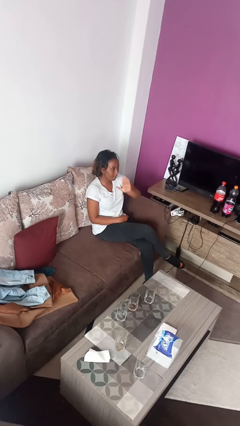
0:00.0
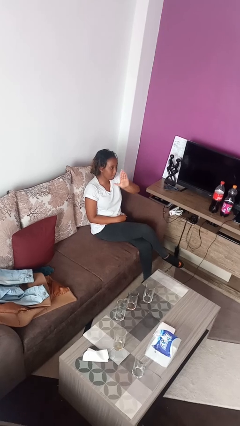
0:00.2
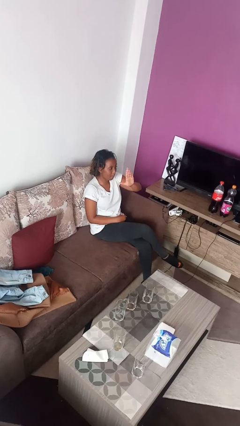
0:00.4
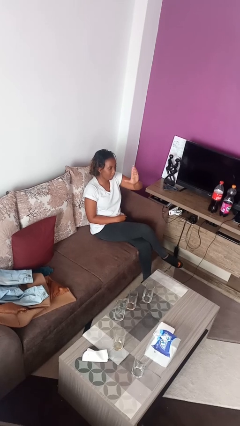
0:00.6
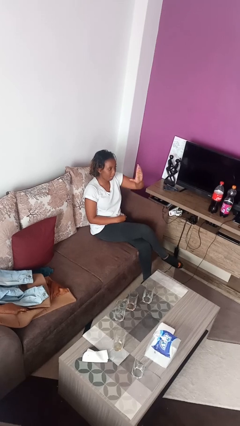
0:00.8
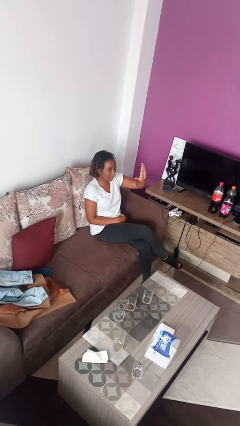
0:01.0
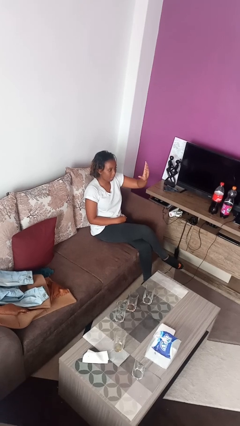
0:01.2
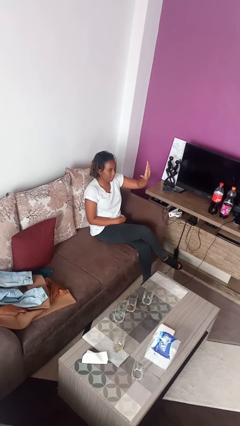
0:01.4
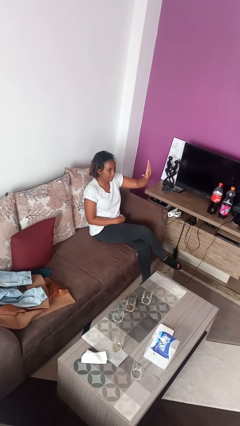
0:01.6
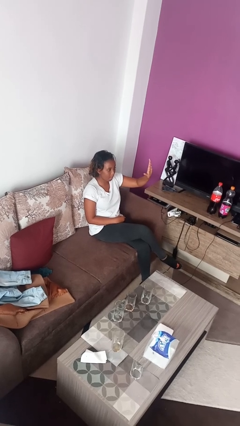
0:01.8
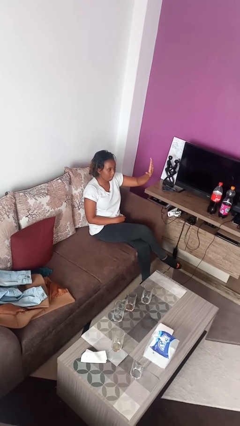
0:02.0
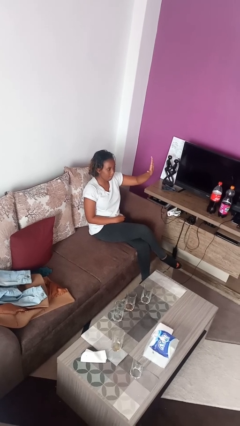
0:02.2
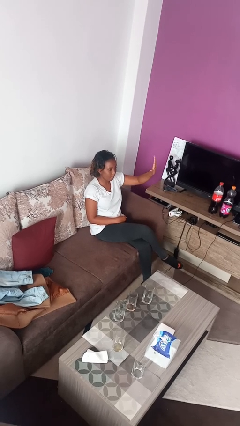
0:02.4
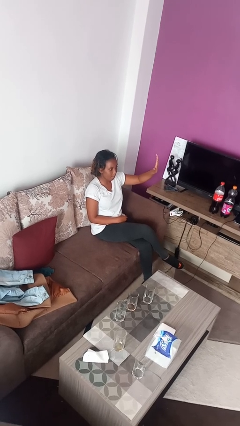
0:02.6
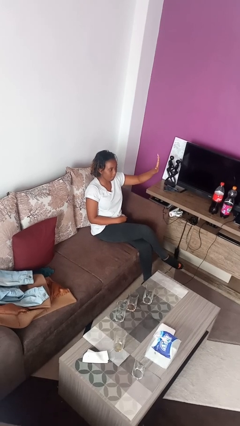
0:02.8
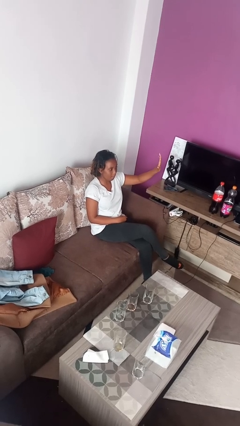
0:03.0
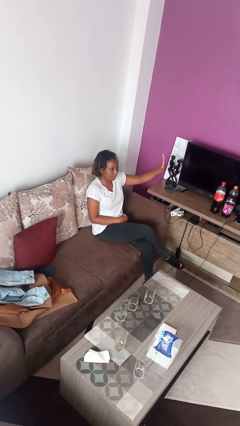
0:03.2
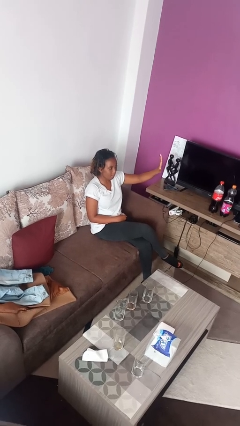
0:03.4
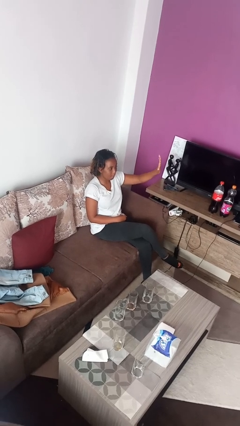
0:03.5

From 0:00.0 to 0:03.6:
person gestures swipe left

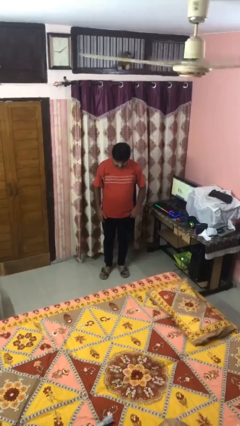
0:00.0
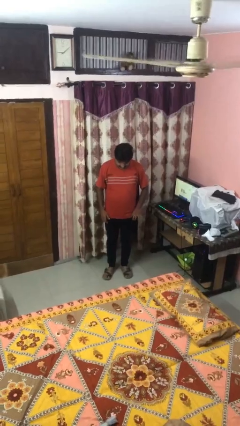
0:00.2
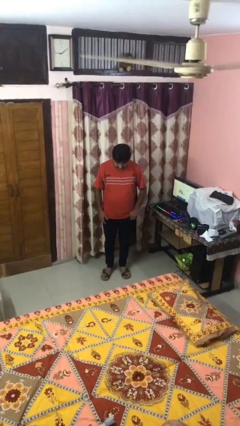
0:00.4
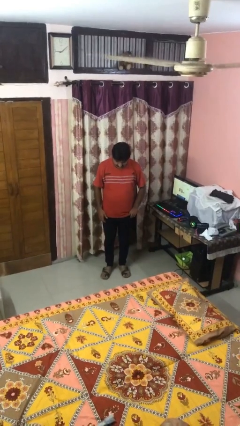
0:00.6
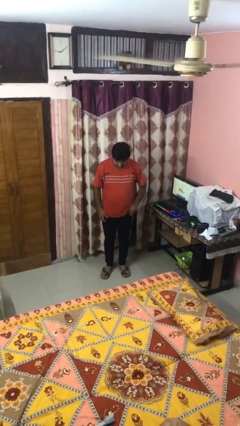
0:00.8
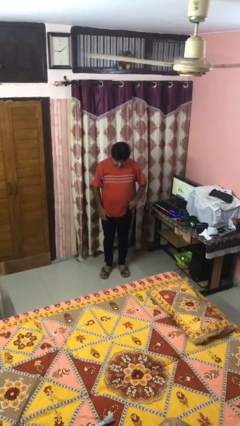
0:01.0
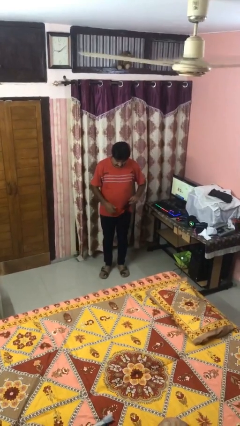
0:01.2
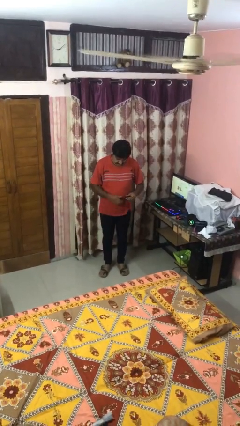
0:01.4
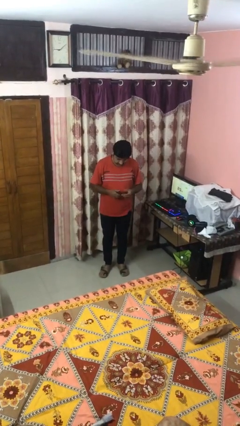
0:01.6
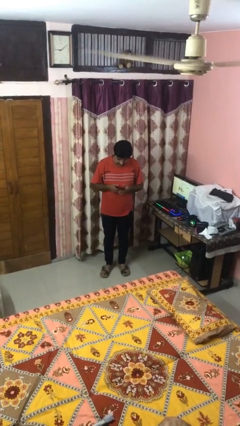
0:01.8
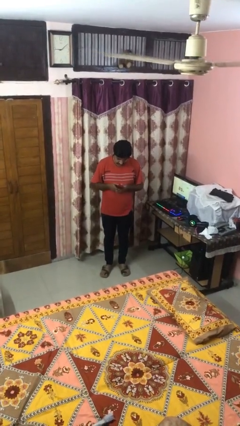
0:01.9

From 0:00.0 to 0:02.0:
person takes phone from pocket

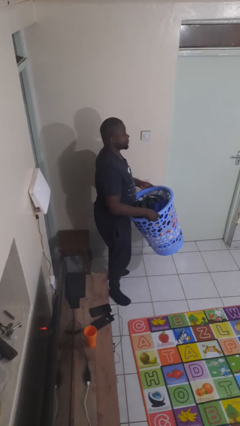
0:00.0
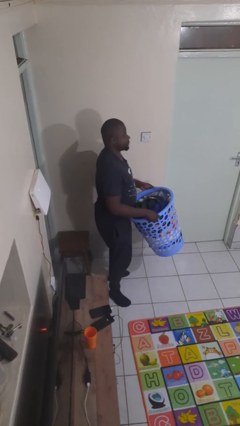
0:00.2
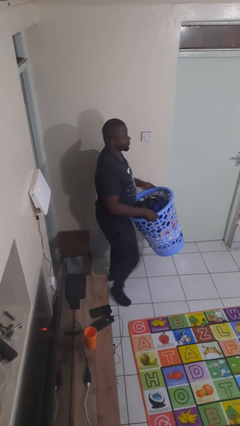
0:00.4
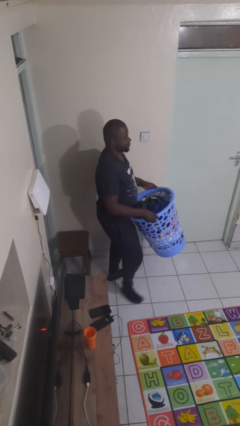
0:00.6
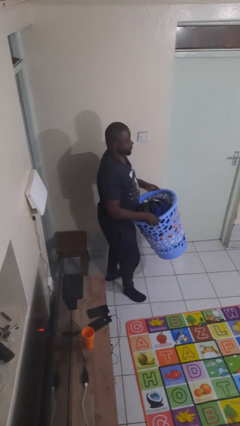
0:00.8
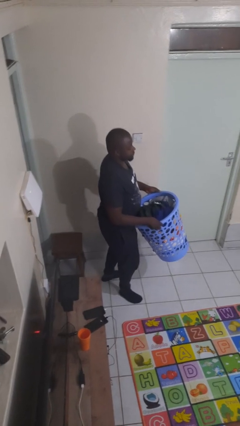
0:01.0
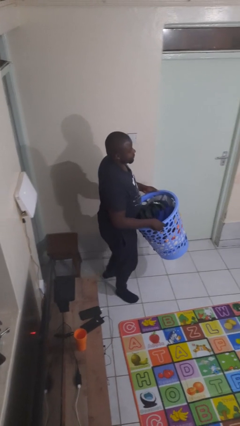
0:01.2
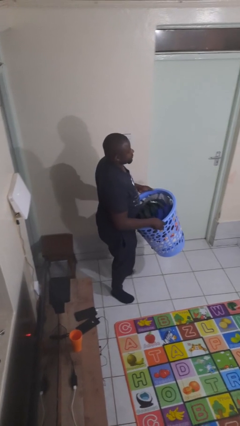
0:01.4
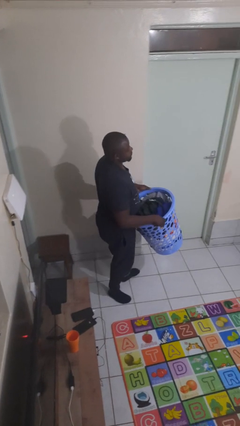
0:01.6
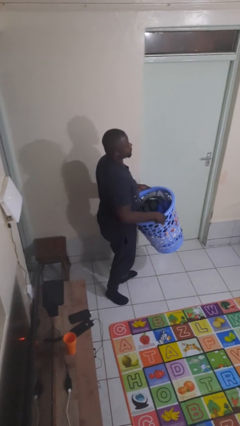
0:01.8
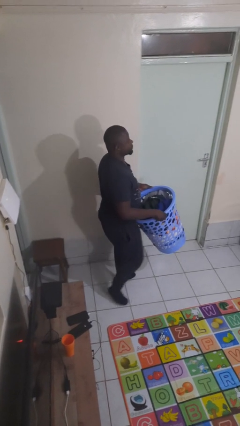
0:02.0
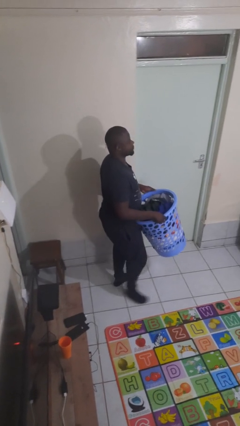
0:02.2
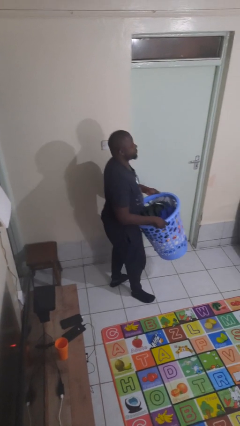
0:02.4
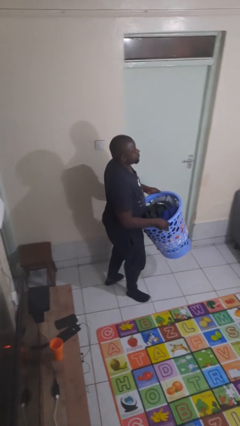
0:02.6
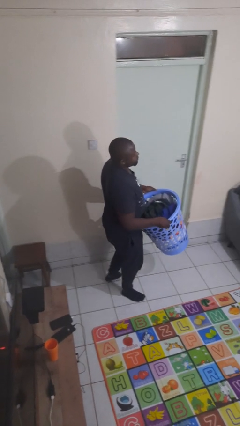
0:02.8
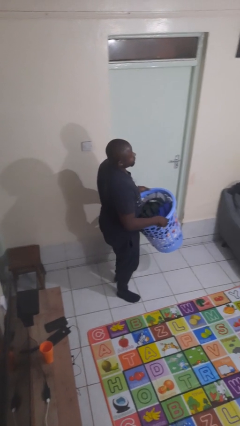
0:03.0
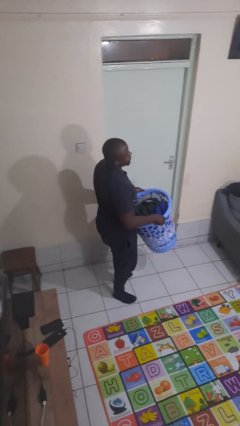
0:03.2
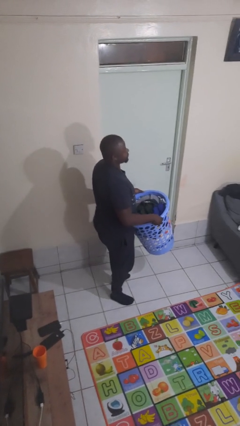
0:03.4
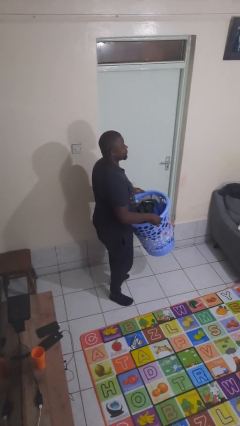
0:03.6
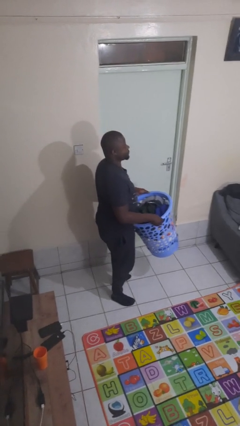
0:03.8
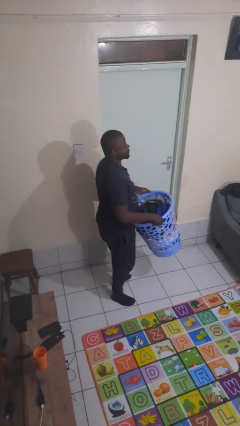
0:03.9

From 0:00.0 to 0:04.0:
person carries laundry basket

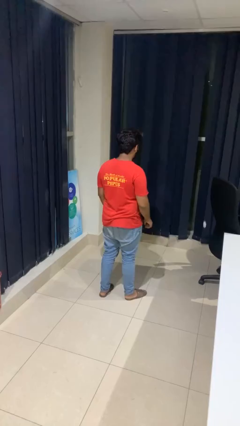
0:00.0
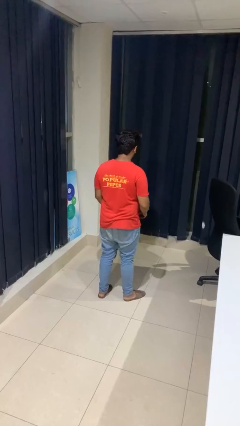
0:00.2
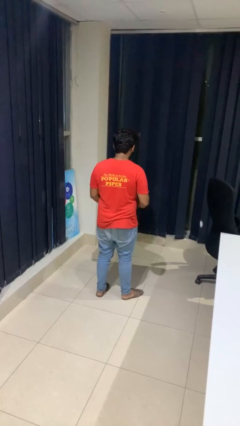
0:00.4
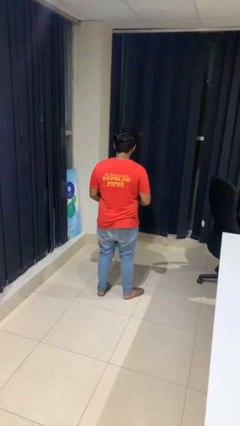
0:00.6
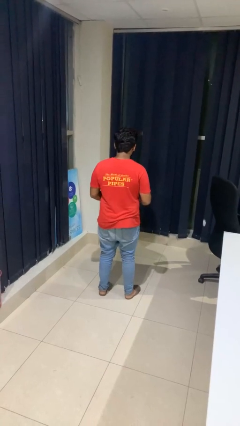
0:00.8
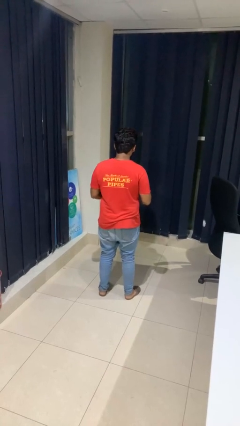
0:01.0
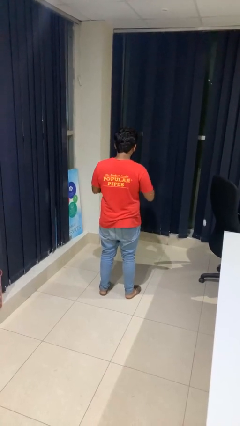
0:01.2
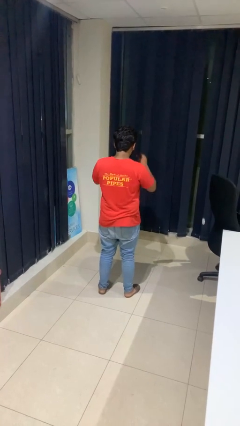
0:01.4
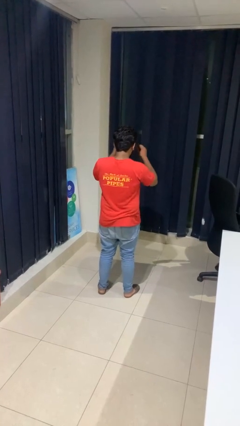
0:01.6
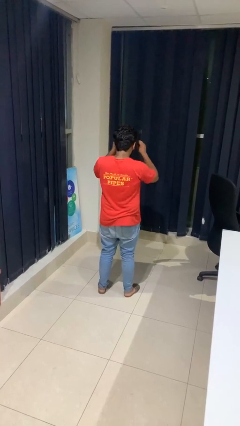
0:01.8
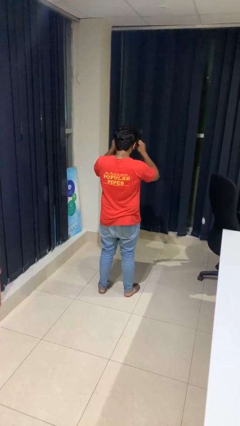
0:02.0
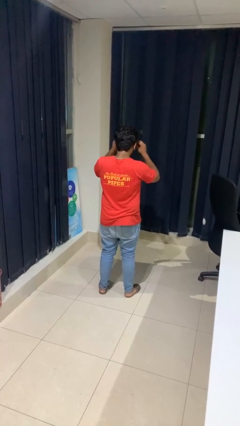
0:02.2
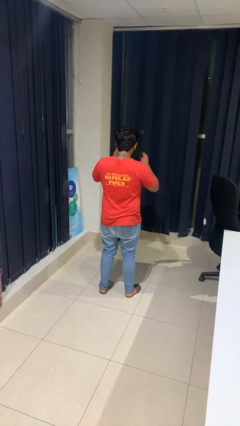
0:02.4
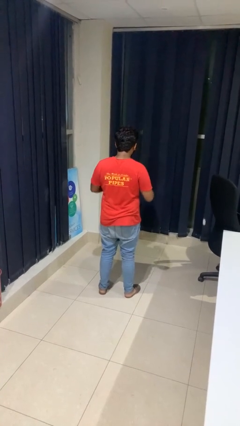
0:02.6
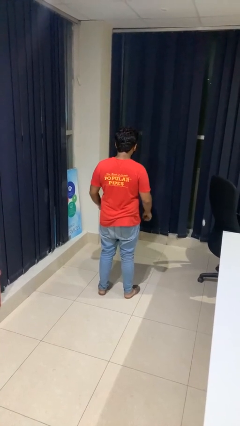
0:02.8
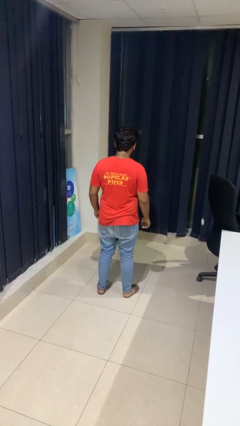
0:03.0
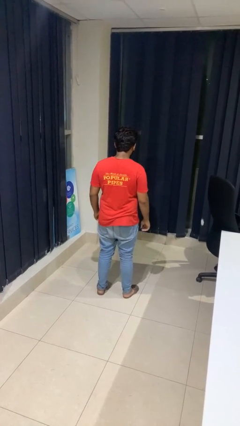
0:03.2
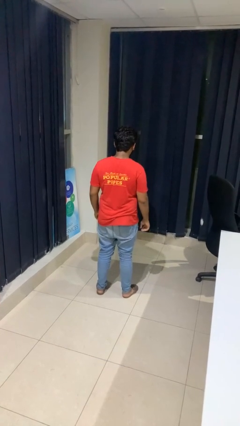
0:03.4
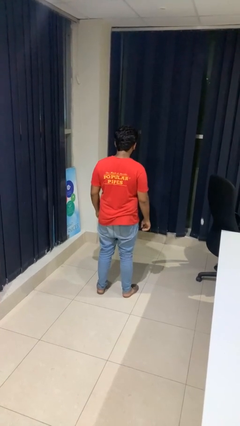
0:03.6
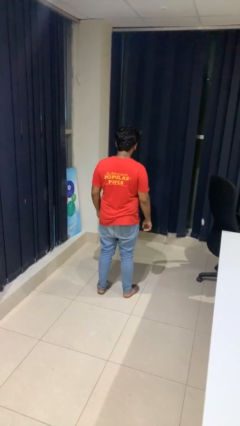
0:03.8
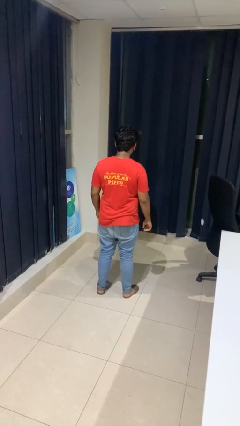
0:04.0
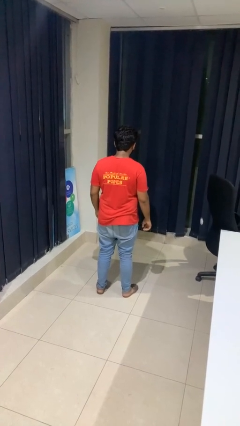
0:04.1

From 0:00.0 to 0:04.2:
person puts on glasses

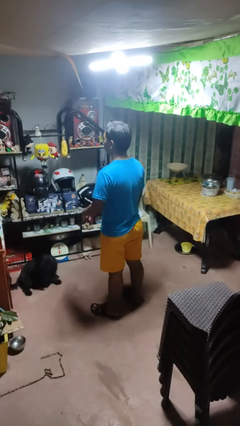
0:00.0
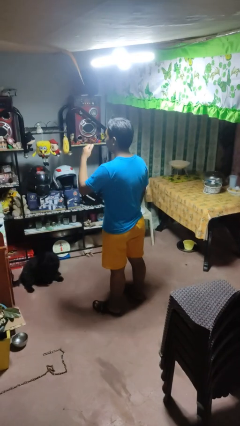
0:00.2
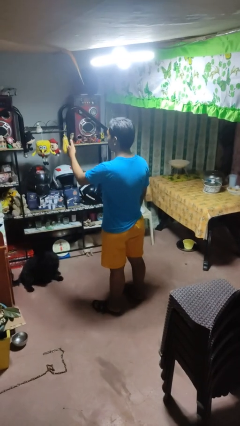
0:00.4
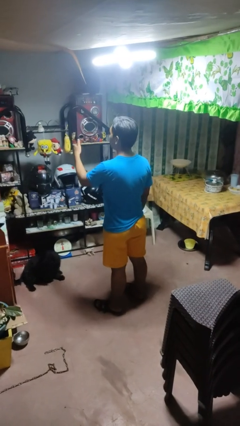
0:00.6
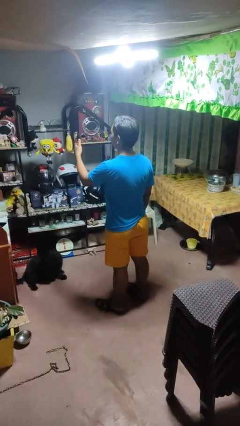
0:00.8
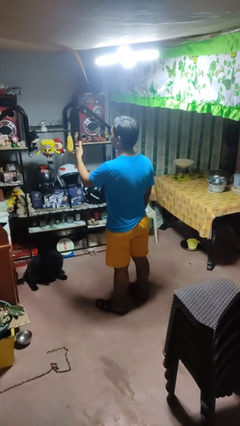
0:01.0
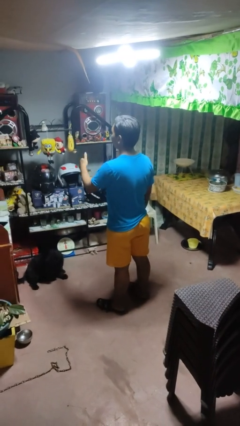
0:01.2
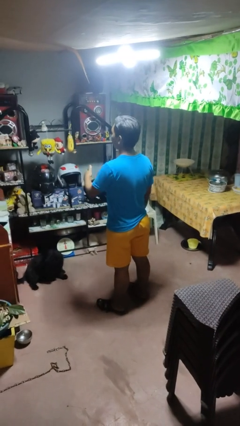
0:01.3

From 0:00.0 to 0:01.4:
person gestures thumbs up

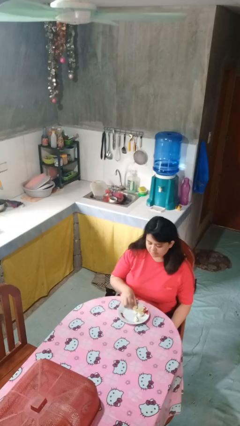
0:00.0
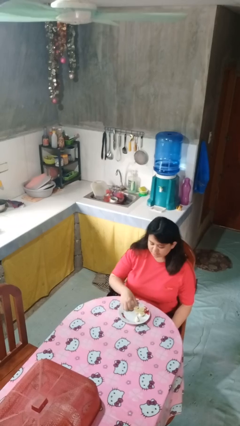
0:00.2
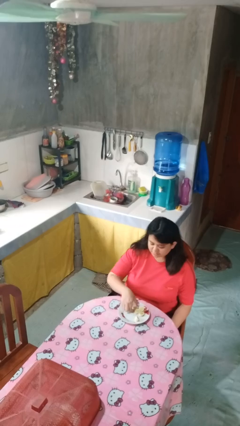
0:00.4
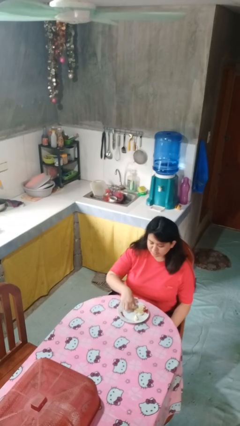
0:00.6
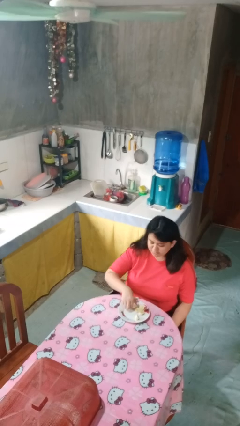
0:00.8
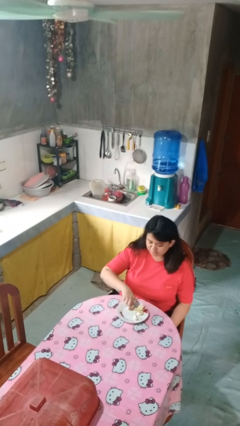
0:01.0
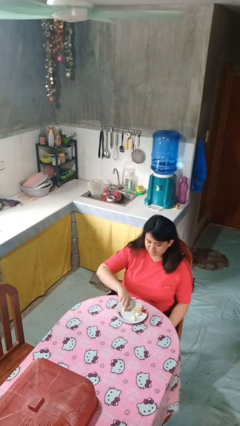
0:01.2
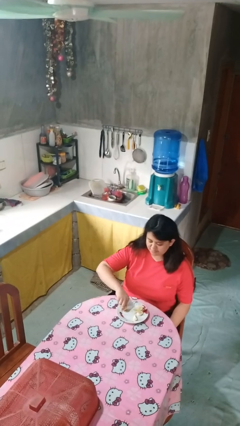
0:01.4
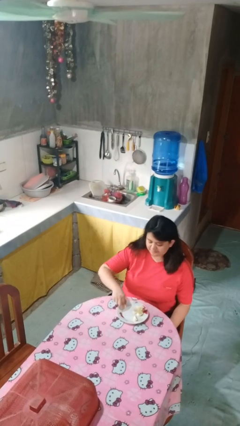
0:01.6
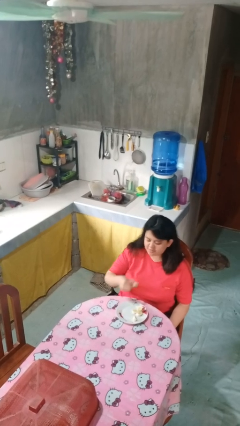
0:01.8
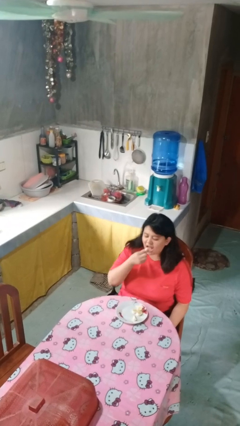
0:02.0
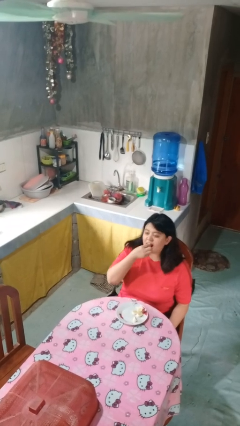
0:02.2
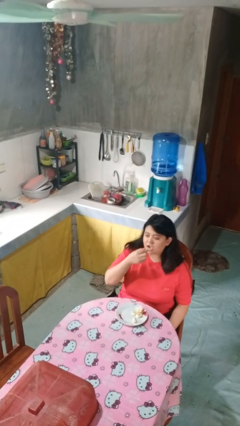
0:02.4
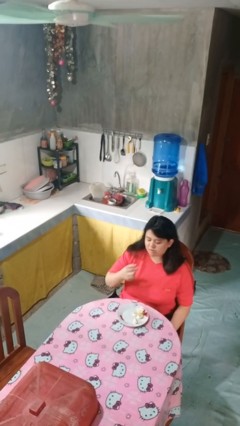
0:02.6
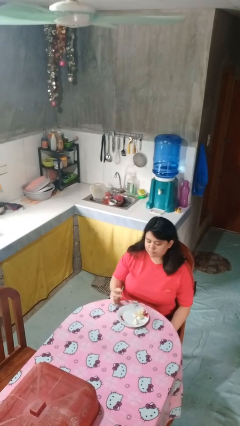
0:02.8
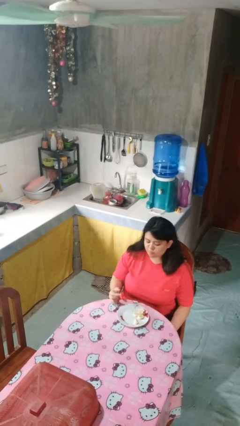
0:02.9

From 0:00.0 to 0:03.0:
person eats with hands
